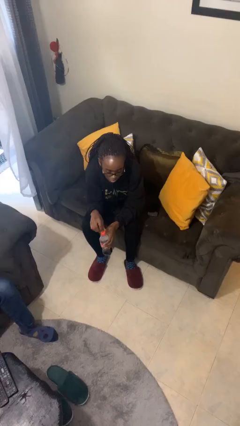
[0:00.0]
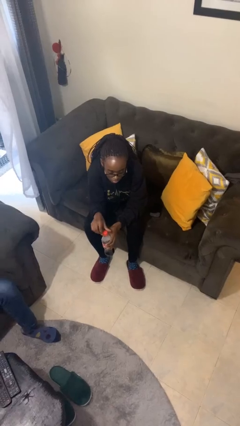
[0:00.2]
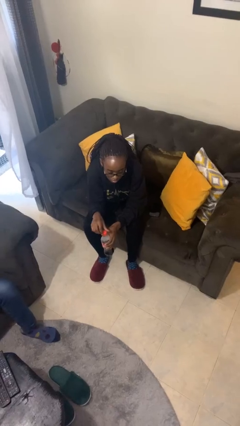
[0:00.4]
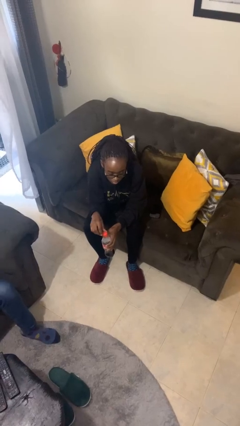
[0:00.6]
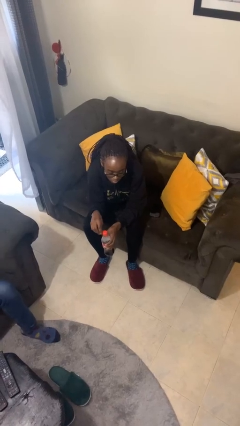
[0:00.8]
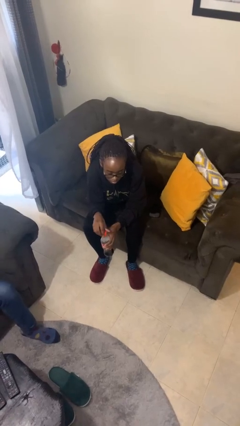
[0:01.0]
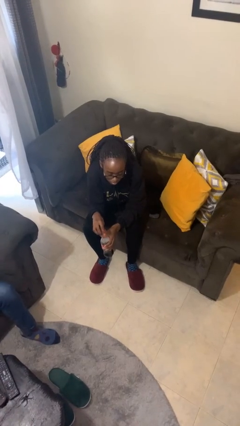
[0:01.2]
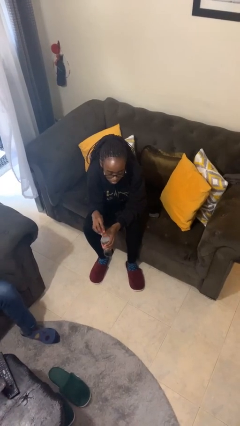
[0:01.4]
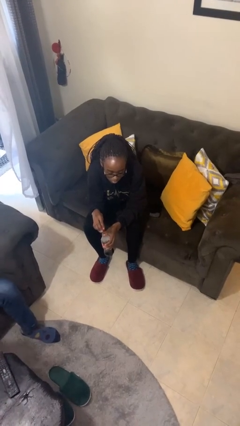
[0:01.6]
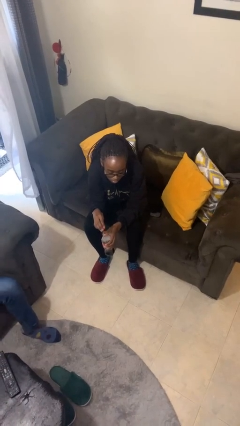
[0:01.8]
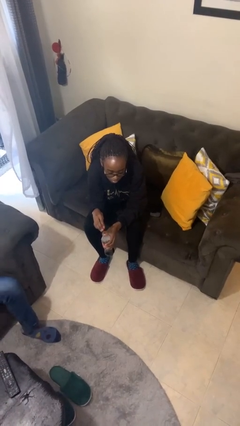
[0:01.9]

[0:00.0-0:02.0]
person unscrews lid from bottle

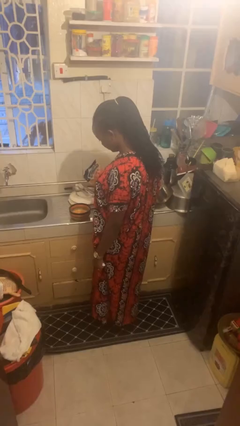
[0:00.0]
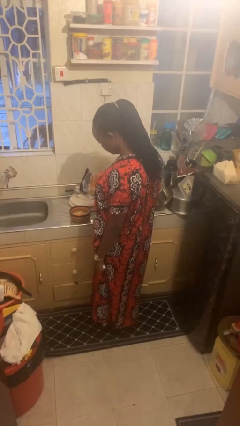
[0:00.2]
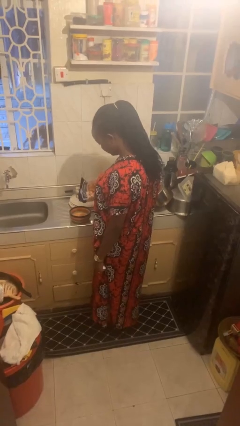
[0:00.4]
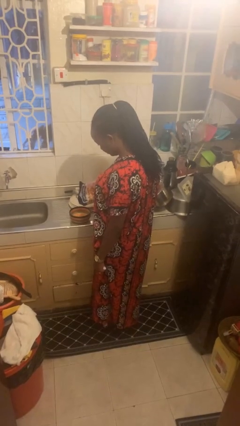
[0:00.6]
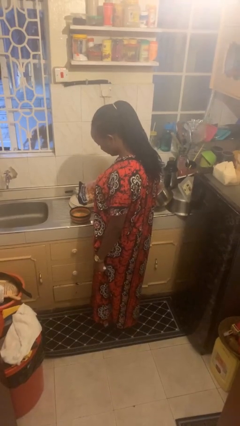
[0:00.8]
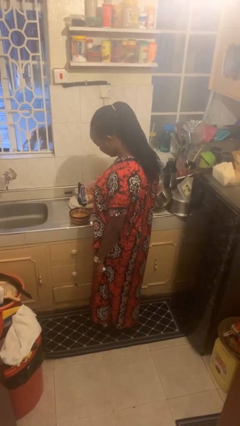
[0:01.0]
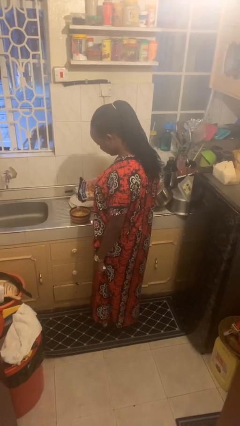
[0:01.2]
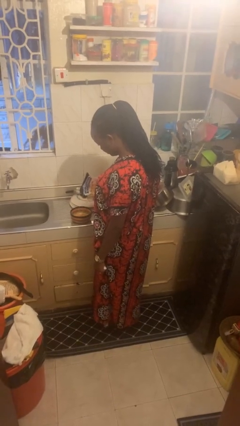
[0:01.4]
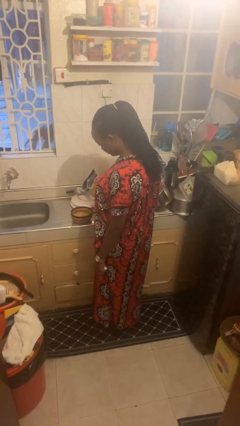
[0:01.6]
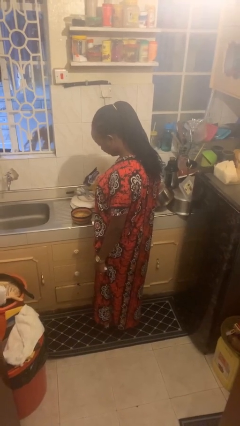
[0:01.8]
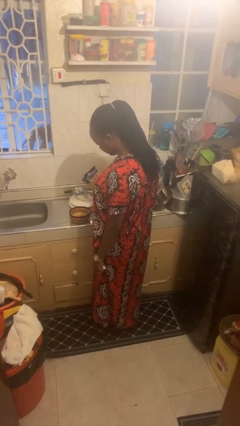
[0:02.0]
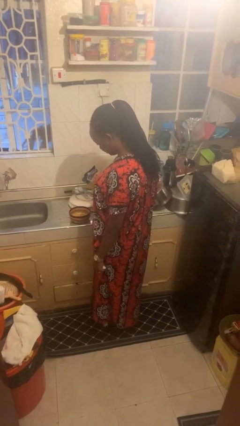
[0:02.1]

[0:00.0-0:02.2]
person pours into bowl

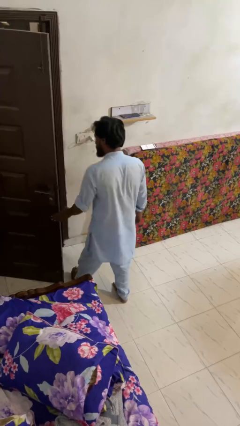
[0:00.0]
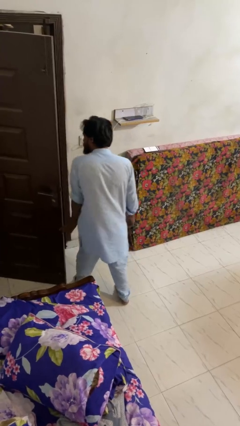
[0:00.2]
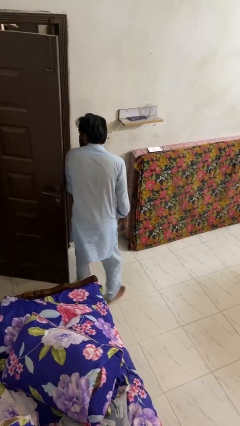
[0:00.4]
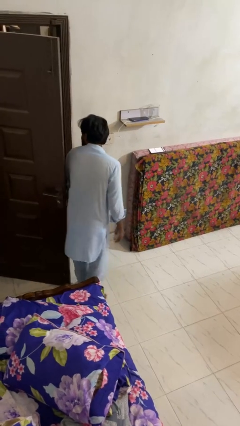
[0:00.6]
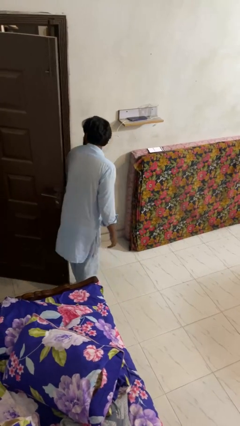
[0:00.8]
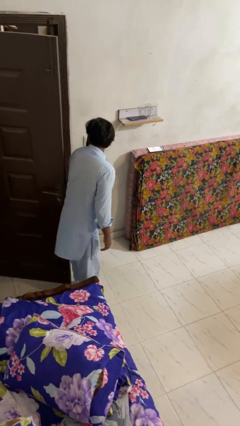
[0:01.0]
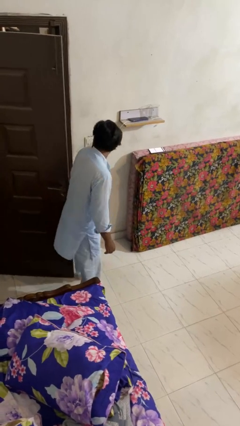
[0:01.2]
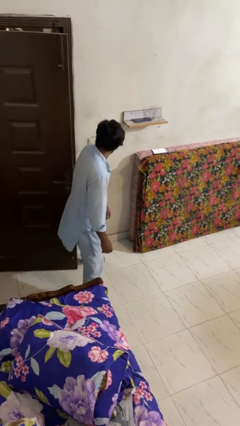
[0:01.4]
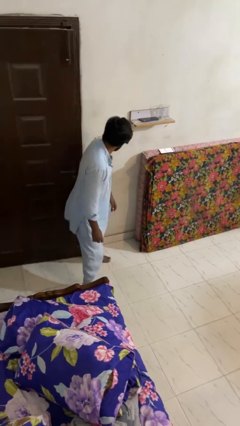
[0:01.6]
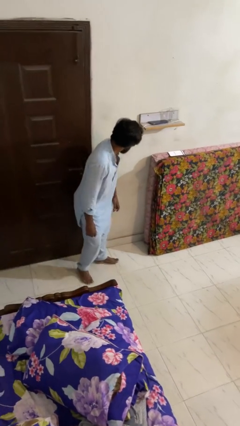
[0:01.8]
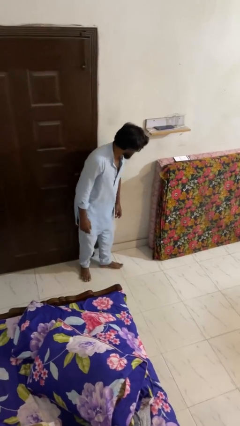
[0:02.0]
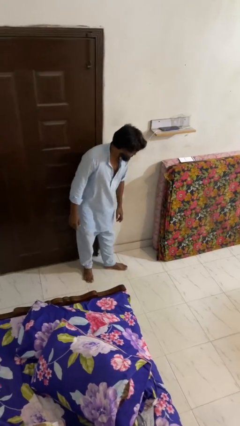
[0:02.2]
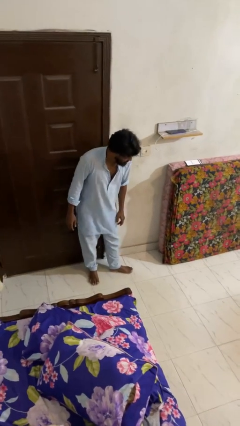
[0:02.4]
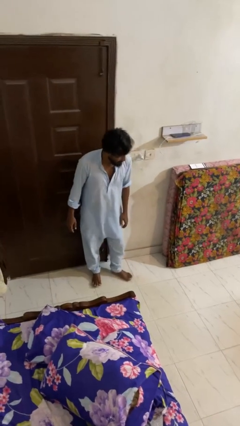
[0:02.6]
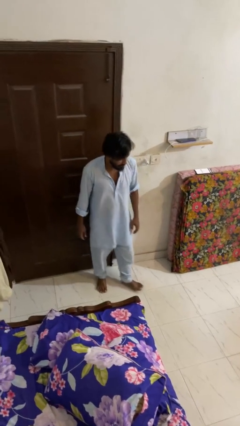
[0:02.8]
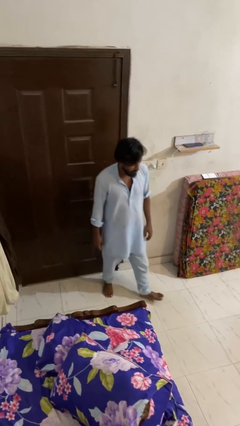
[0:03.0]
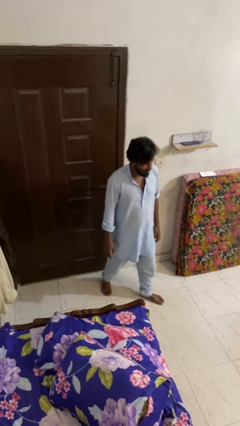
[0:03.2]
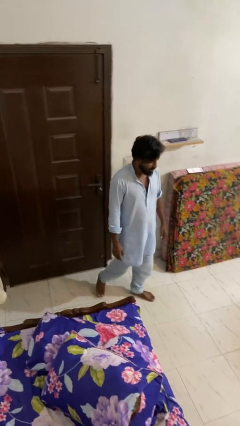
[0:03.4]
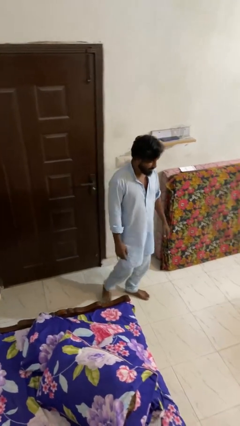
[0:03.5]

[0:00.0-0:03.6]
person closes door with hip

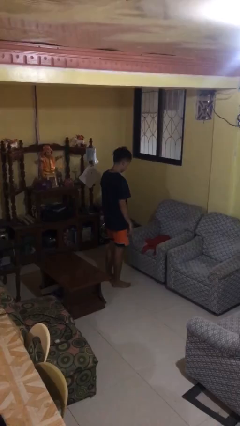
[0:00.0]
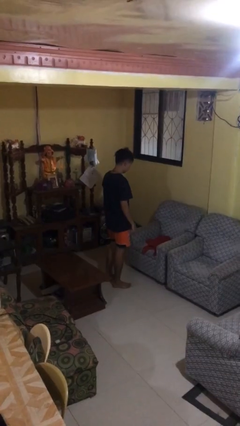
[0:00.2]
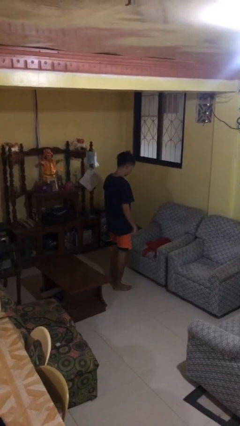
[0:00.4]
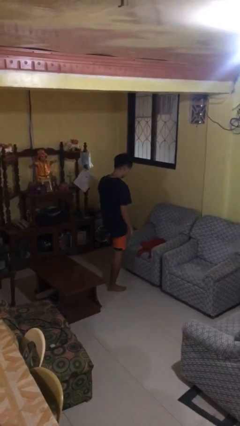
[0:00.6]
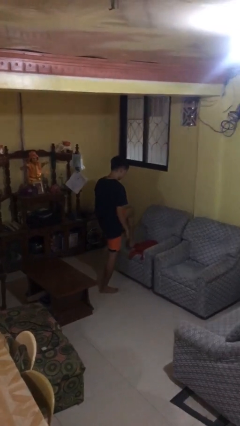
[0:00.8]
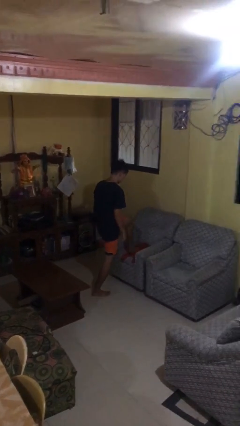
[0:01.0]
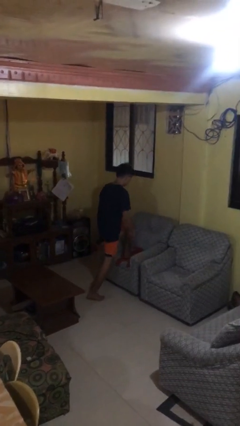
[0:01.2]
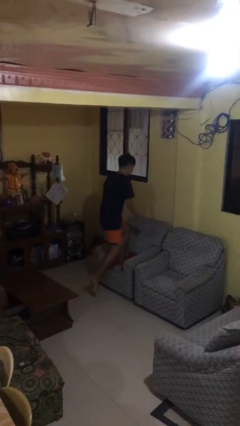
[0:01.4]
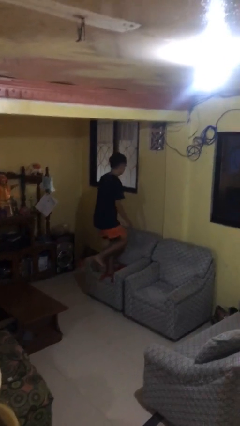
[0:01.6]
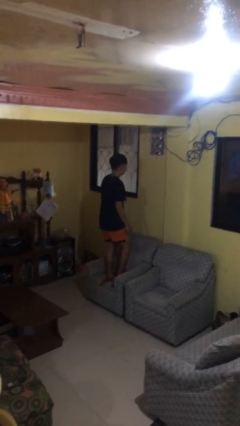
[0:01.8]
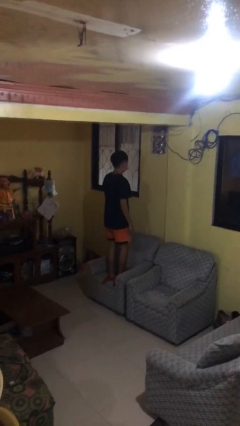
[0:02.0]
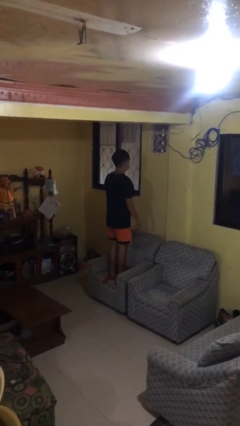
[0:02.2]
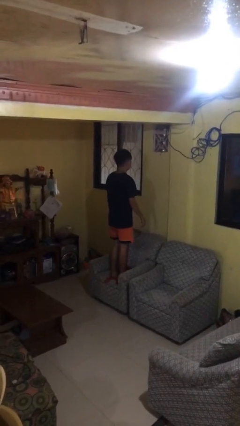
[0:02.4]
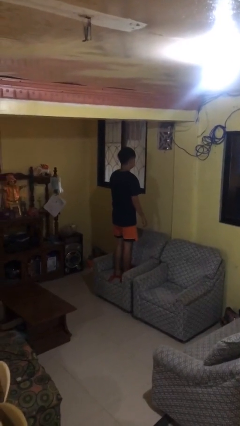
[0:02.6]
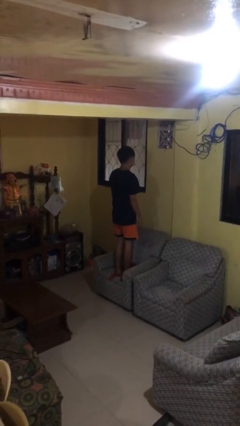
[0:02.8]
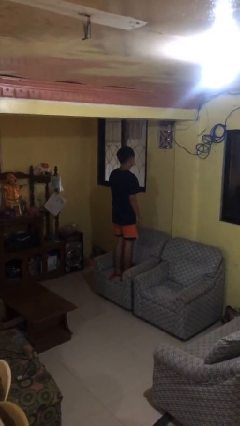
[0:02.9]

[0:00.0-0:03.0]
person climbs on couch

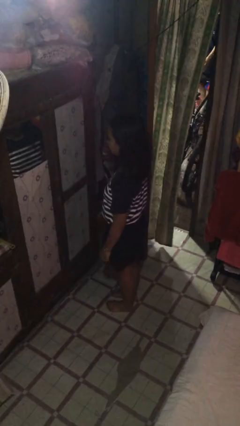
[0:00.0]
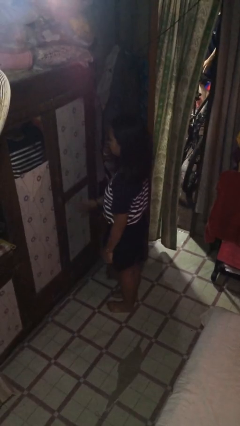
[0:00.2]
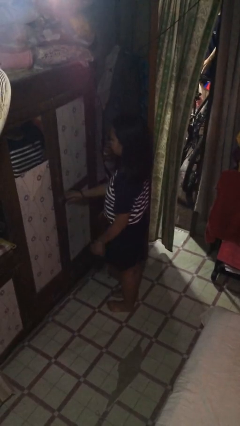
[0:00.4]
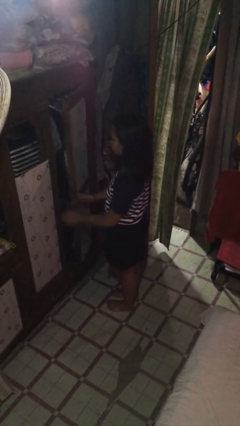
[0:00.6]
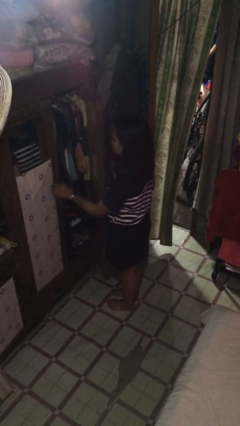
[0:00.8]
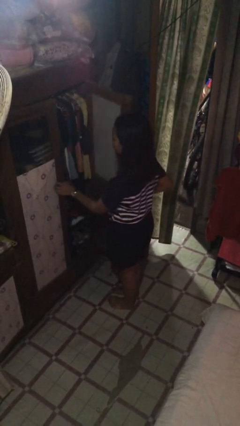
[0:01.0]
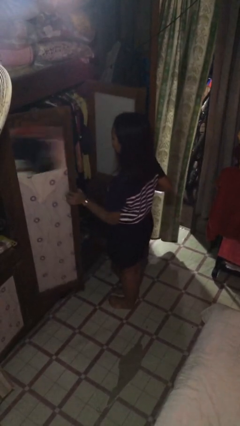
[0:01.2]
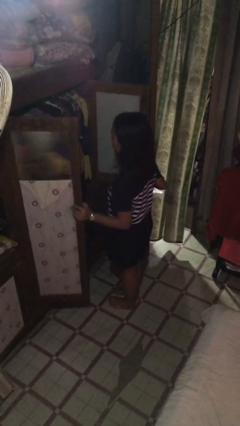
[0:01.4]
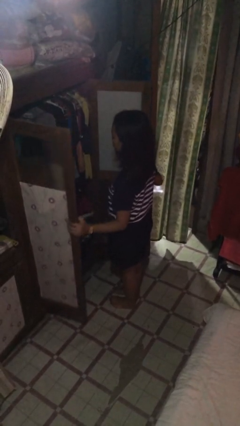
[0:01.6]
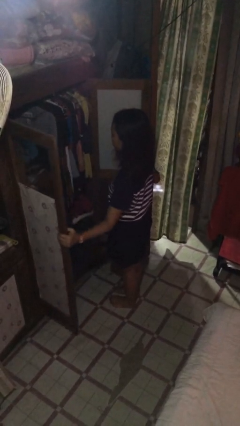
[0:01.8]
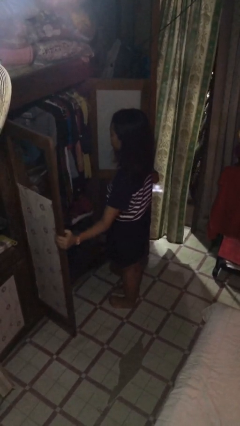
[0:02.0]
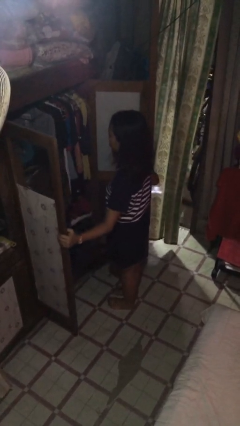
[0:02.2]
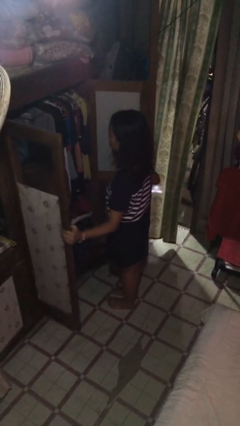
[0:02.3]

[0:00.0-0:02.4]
person opens closet door

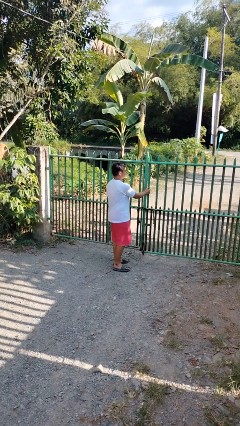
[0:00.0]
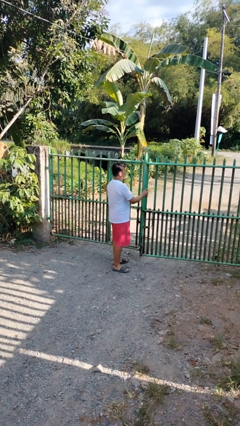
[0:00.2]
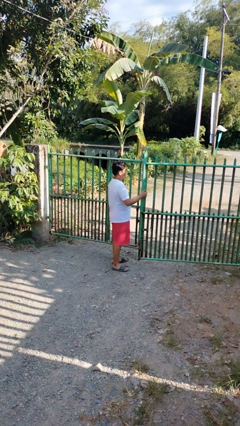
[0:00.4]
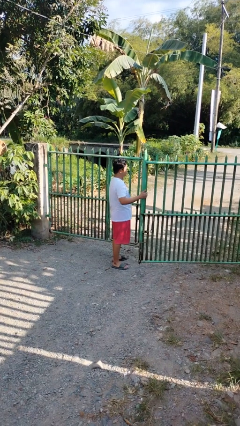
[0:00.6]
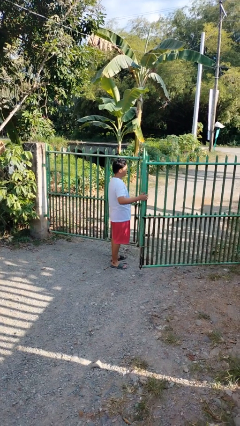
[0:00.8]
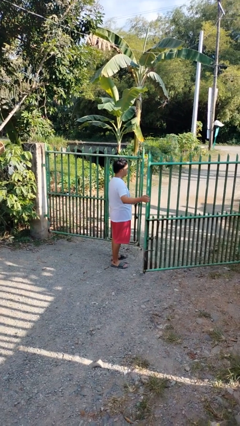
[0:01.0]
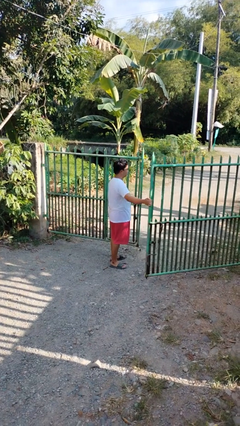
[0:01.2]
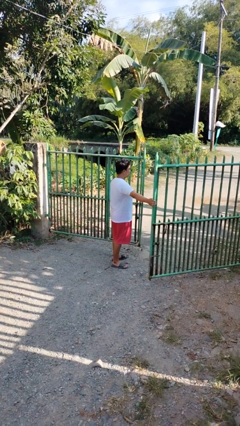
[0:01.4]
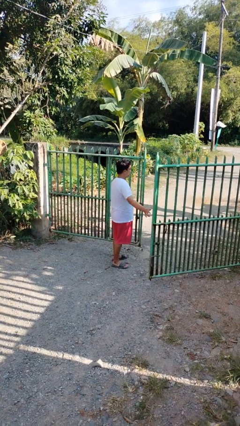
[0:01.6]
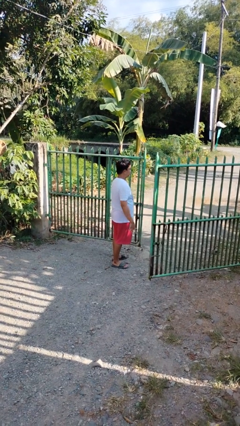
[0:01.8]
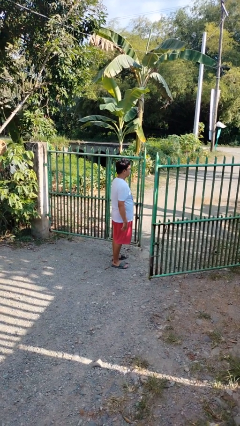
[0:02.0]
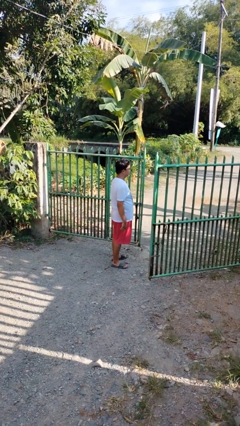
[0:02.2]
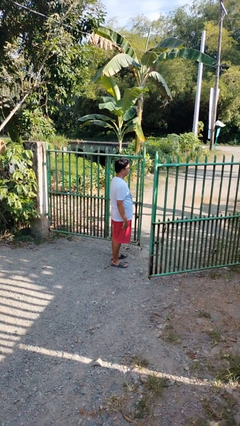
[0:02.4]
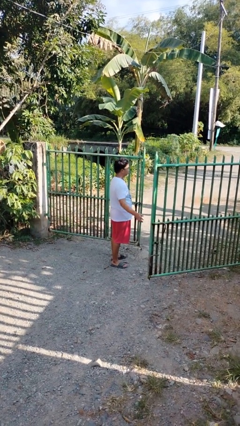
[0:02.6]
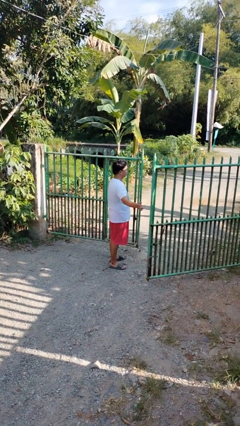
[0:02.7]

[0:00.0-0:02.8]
person opens gate

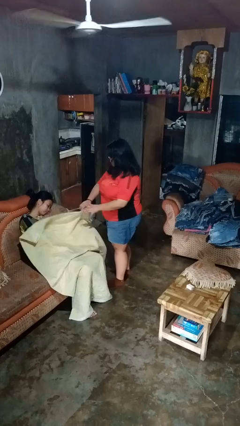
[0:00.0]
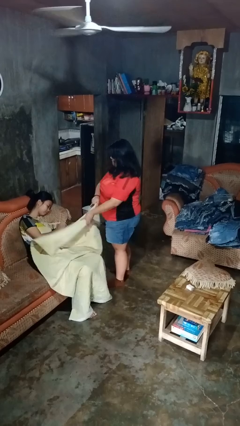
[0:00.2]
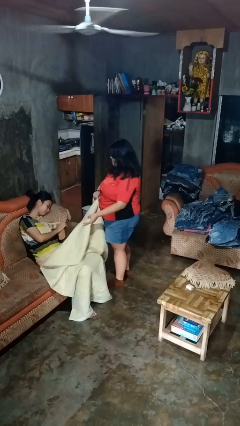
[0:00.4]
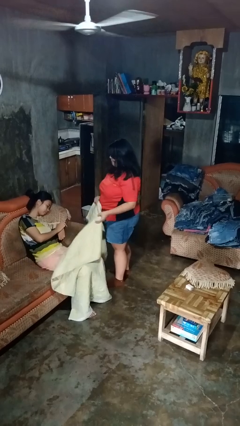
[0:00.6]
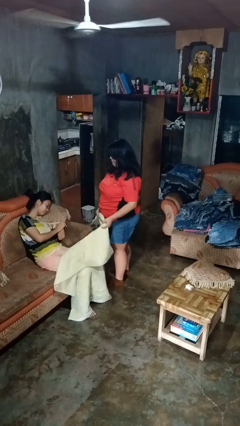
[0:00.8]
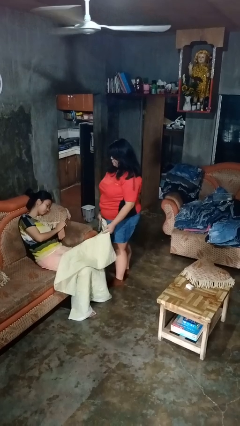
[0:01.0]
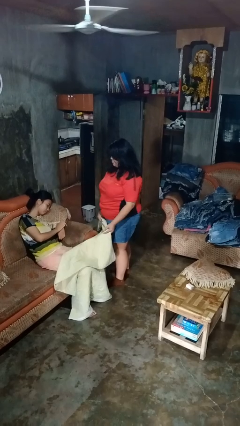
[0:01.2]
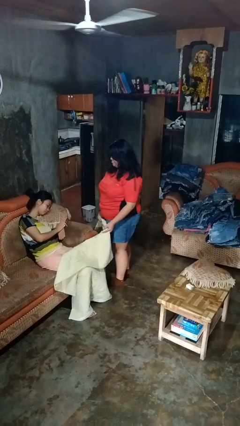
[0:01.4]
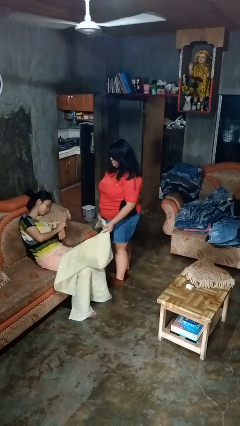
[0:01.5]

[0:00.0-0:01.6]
person uncovers friend with blanket
